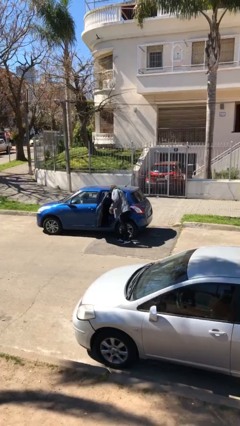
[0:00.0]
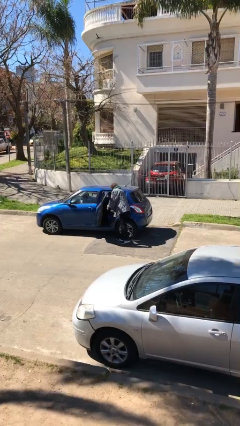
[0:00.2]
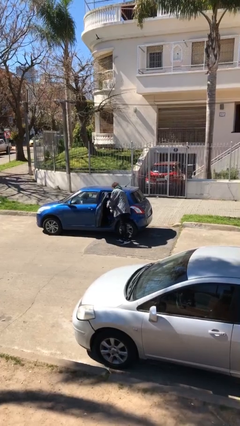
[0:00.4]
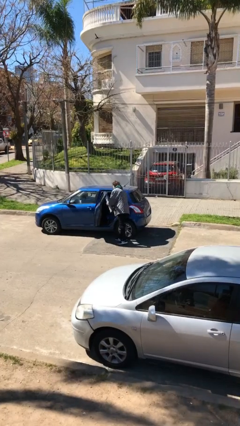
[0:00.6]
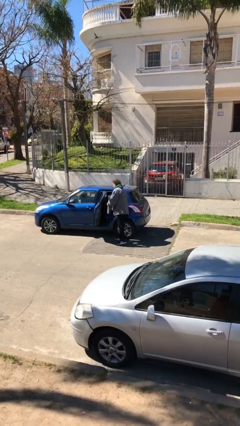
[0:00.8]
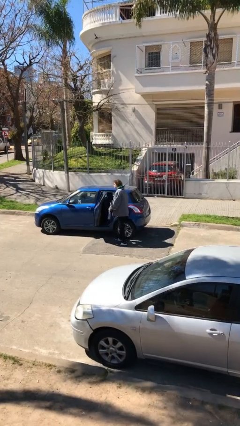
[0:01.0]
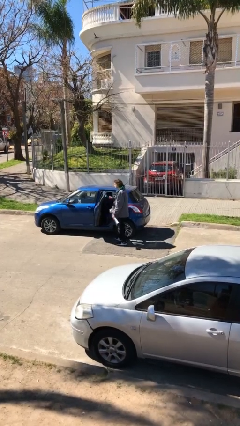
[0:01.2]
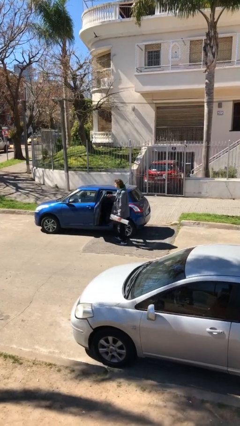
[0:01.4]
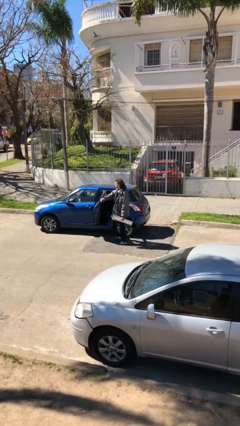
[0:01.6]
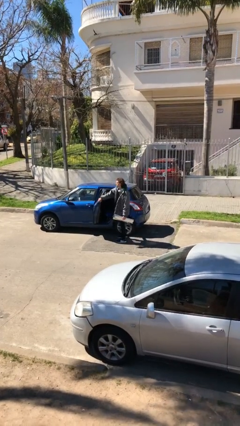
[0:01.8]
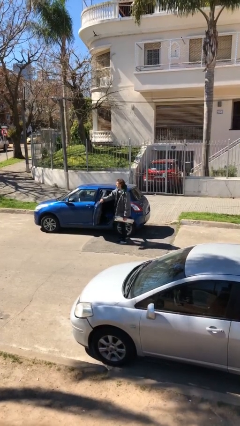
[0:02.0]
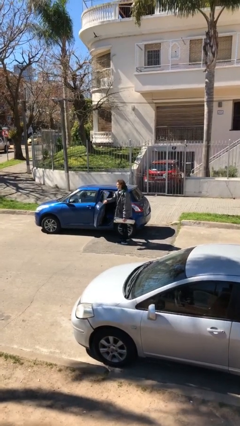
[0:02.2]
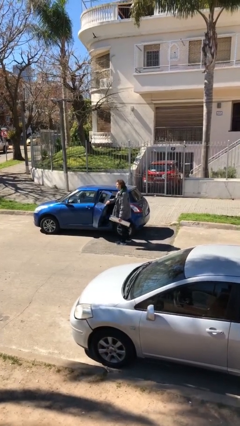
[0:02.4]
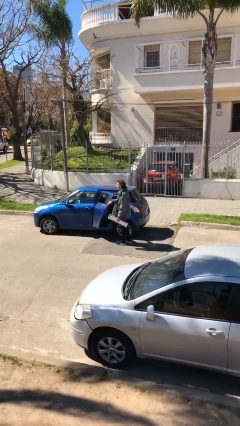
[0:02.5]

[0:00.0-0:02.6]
person unloads car

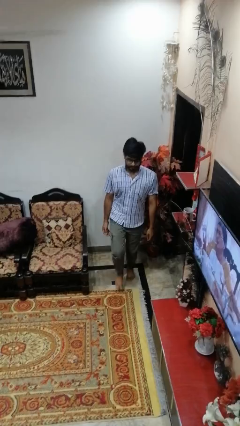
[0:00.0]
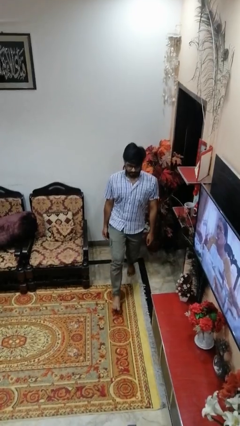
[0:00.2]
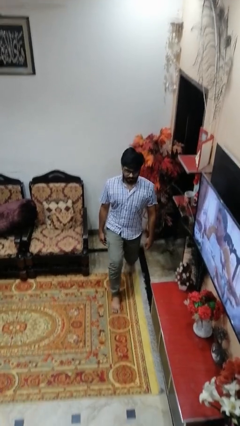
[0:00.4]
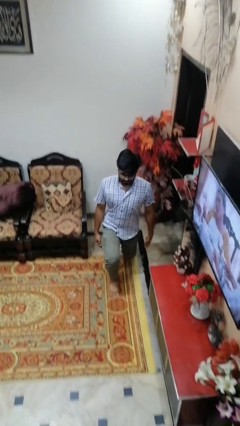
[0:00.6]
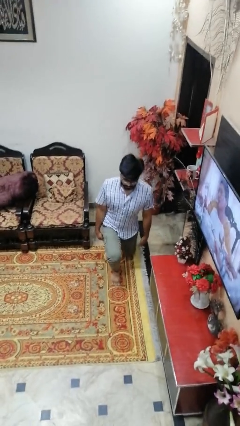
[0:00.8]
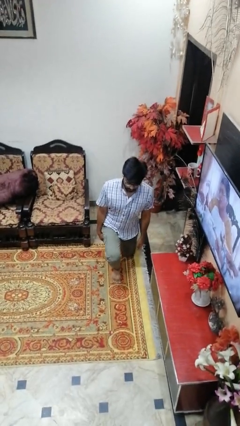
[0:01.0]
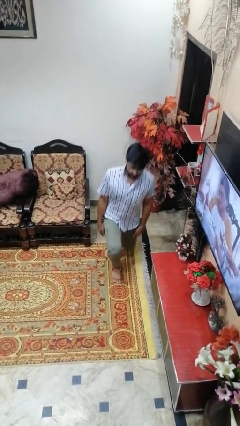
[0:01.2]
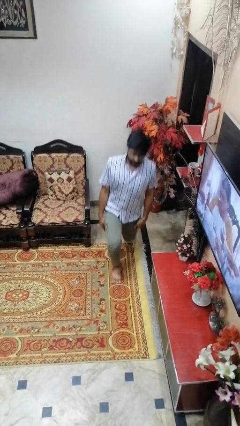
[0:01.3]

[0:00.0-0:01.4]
person exercises with lunges

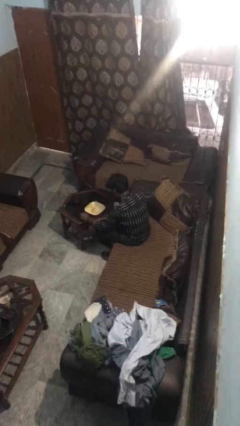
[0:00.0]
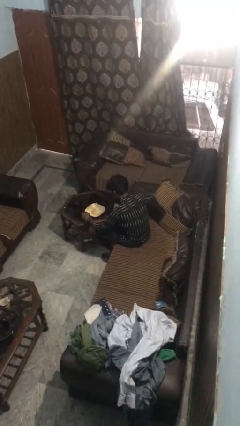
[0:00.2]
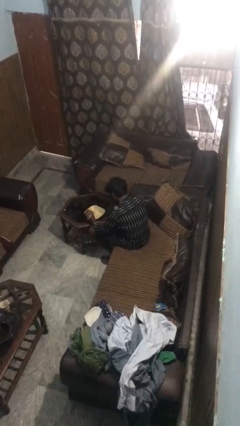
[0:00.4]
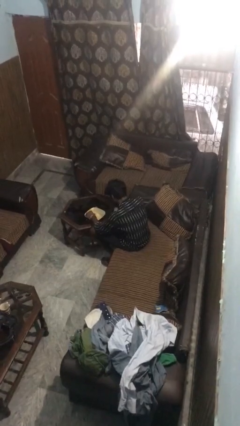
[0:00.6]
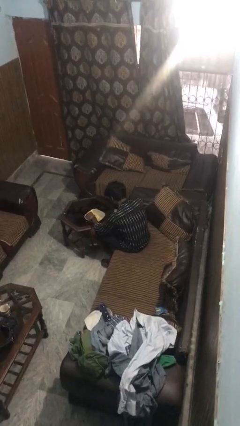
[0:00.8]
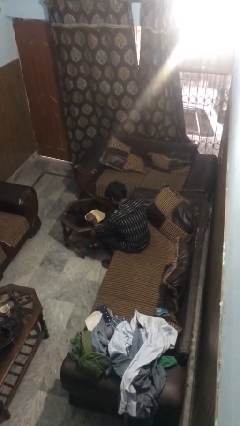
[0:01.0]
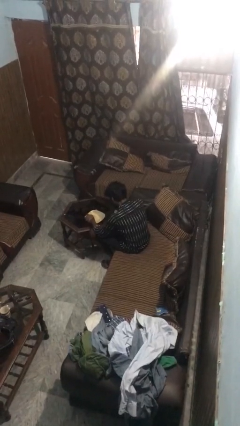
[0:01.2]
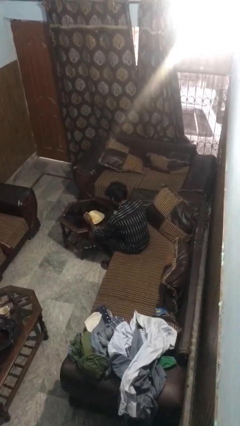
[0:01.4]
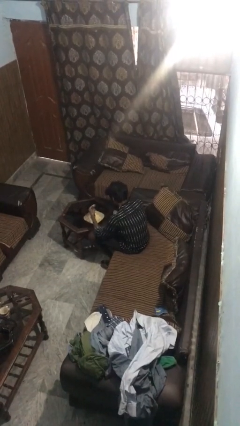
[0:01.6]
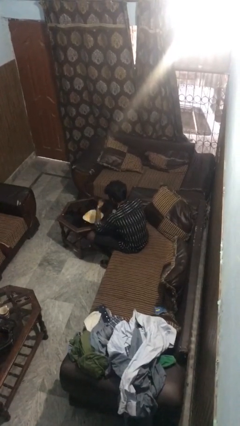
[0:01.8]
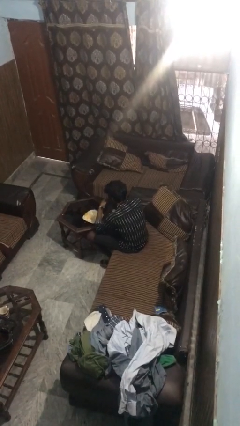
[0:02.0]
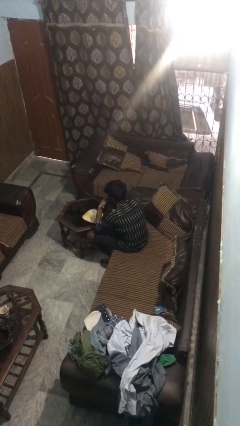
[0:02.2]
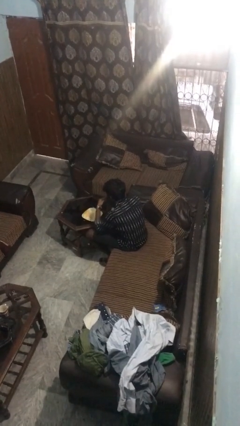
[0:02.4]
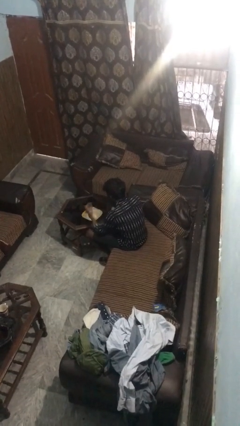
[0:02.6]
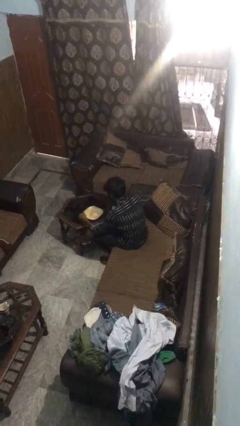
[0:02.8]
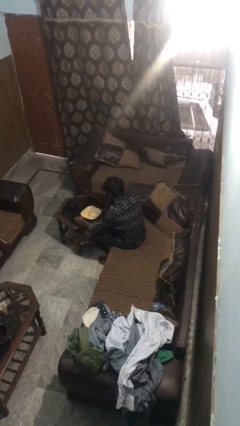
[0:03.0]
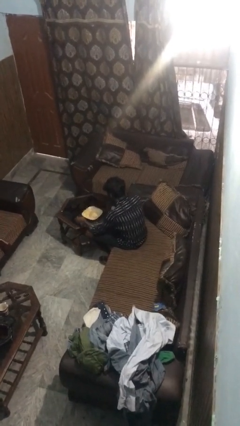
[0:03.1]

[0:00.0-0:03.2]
person eats with hands

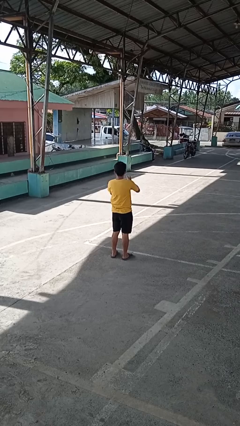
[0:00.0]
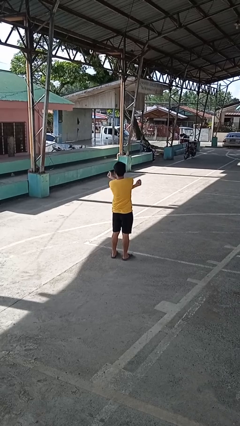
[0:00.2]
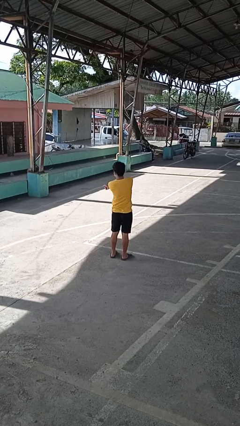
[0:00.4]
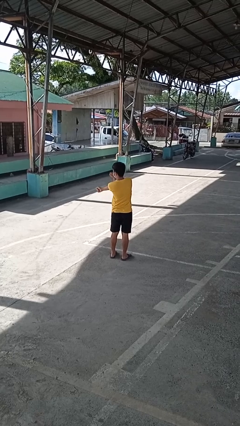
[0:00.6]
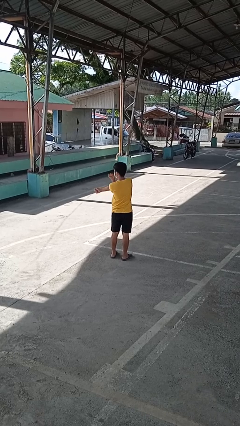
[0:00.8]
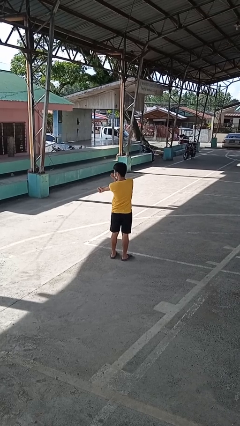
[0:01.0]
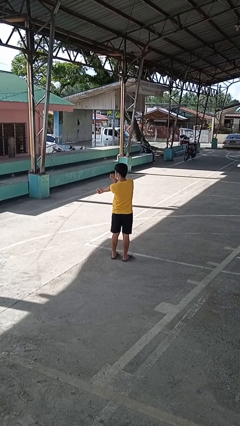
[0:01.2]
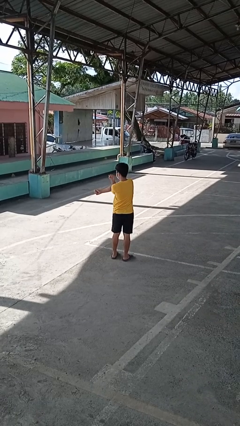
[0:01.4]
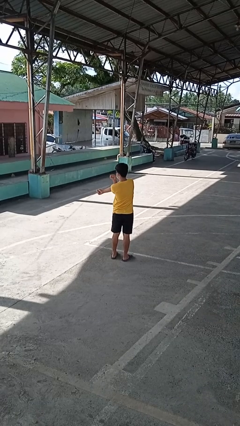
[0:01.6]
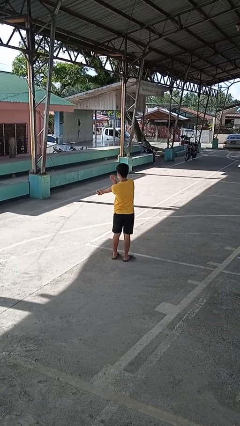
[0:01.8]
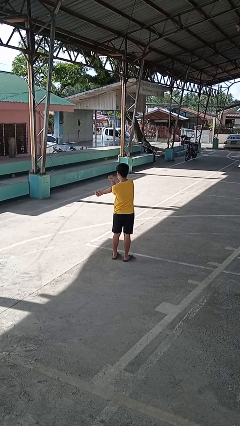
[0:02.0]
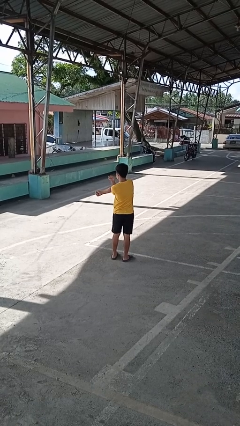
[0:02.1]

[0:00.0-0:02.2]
person stretches arms to side

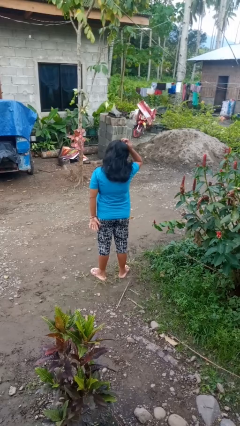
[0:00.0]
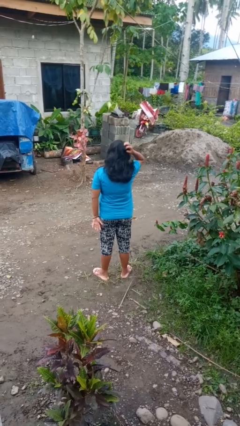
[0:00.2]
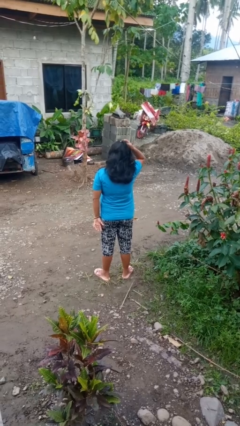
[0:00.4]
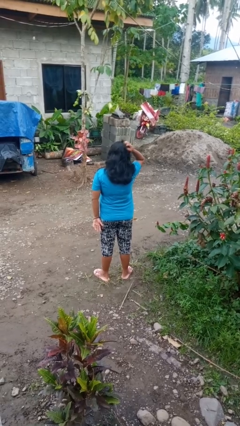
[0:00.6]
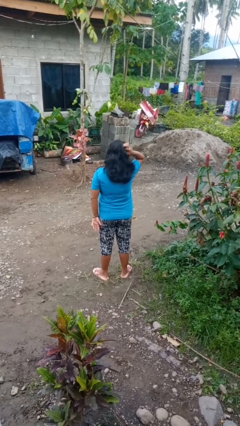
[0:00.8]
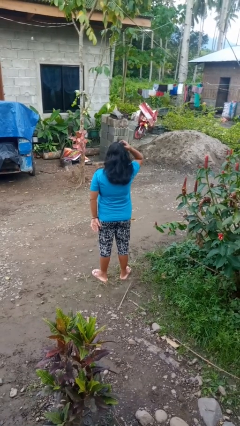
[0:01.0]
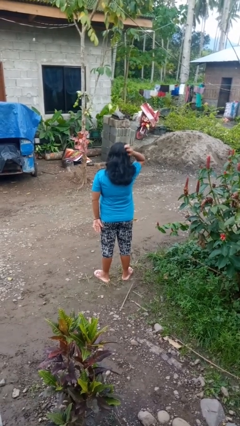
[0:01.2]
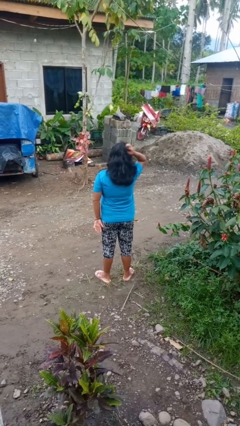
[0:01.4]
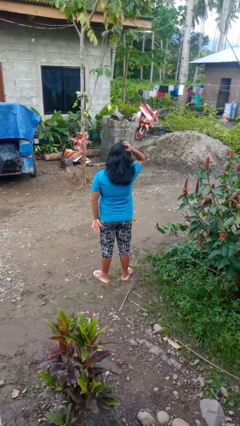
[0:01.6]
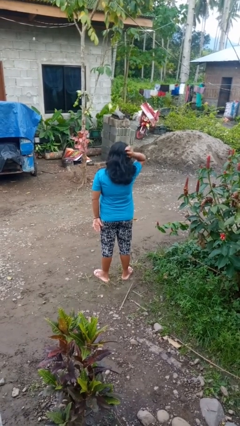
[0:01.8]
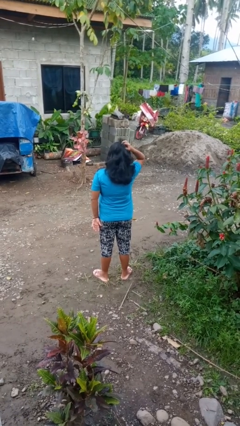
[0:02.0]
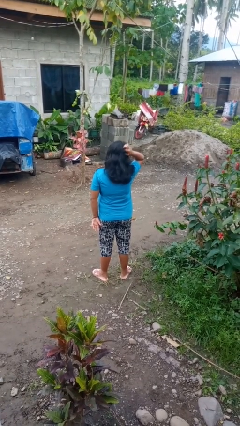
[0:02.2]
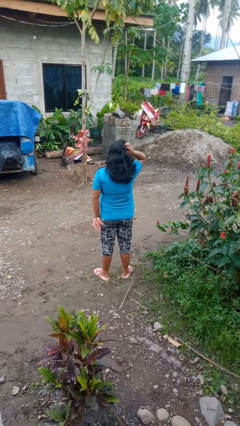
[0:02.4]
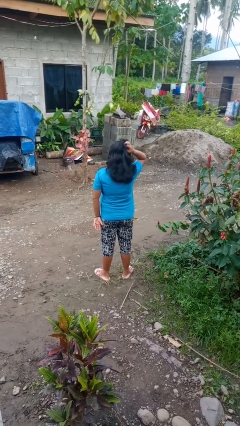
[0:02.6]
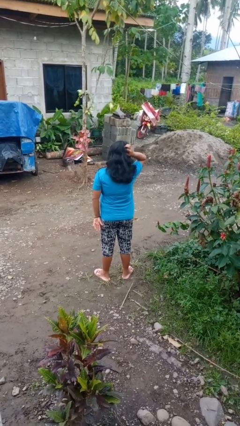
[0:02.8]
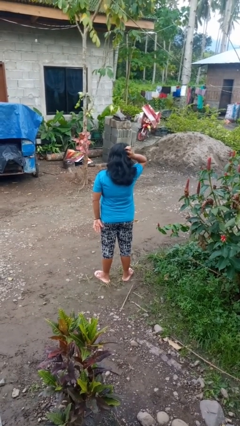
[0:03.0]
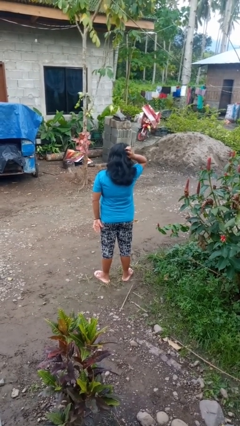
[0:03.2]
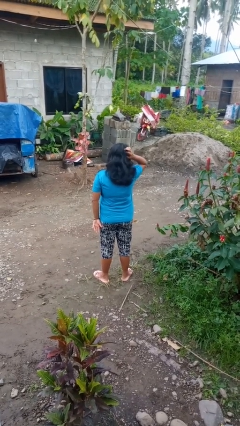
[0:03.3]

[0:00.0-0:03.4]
person scratches face

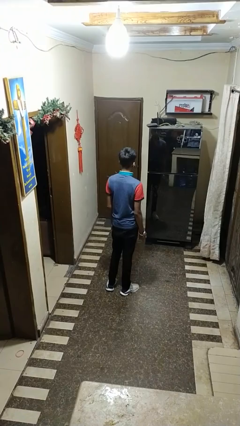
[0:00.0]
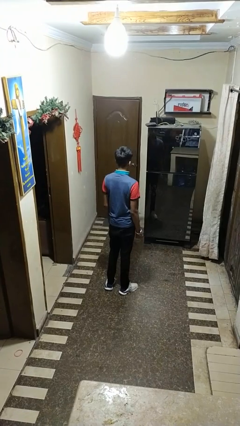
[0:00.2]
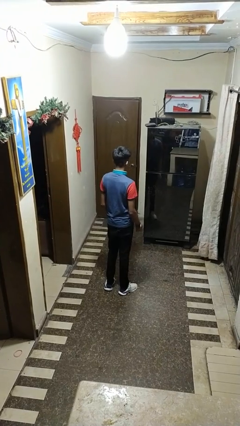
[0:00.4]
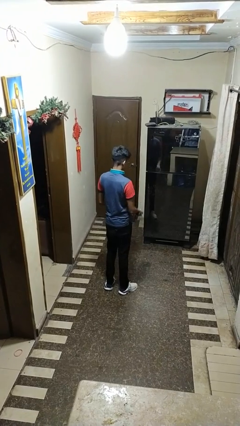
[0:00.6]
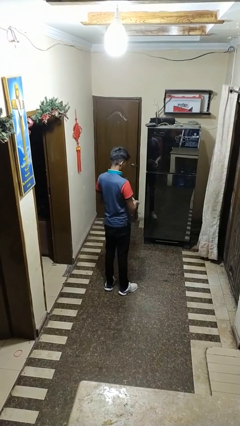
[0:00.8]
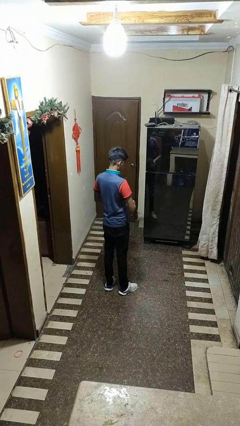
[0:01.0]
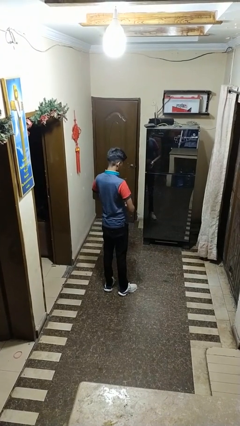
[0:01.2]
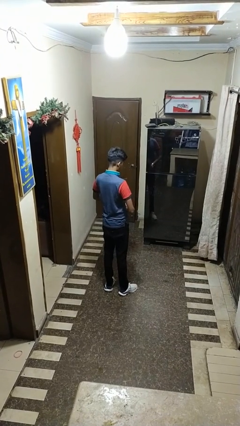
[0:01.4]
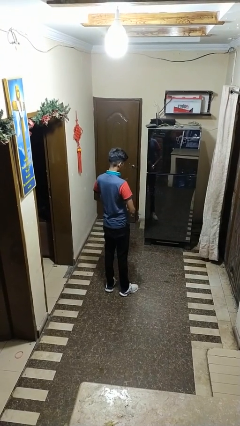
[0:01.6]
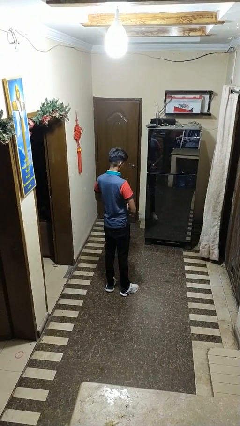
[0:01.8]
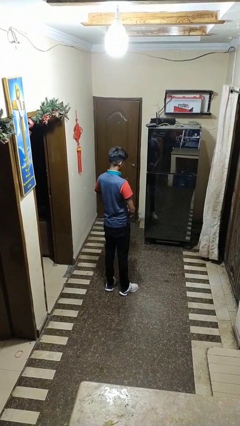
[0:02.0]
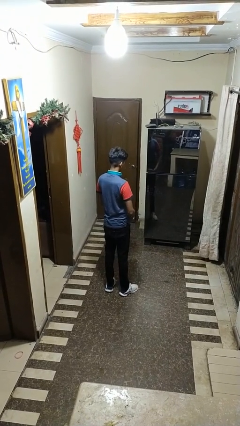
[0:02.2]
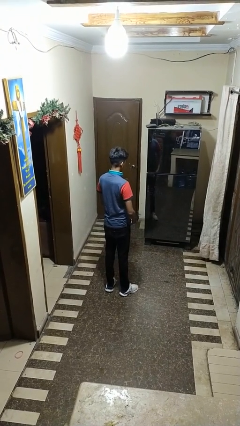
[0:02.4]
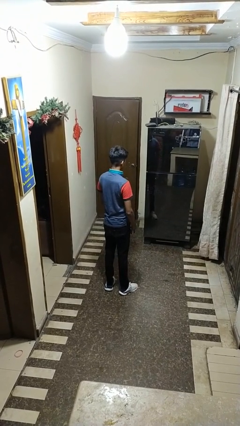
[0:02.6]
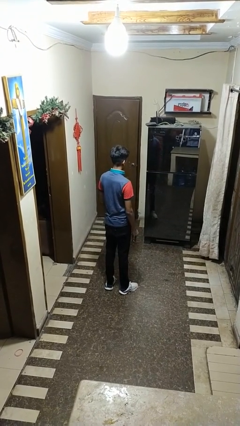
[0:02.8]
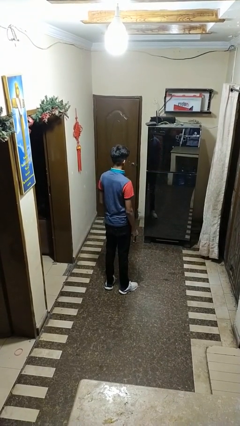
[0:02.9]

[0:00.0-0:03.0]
person takes off wristwatch

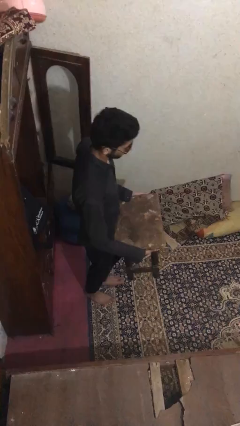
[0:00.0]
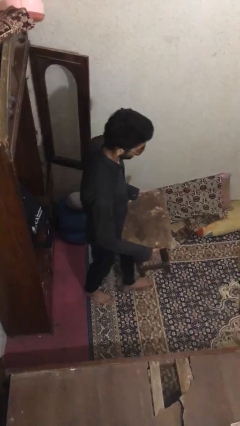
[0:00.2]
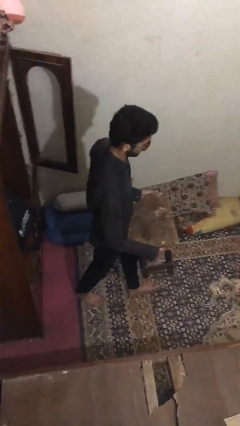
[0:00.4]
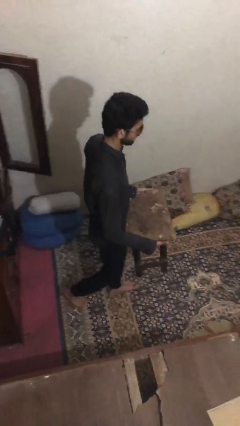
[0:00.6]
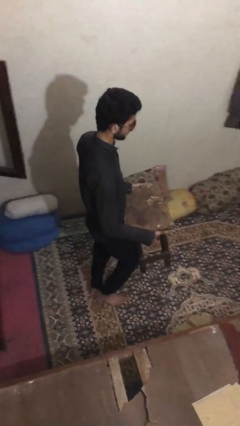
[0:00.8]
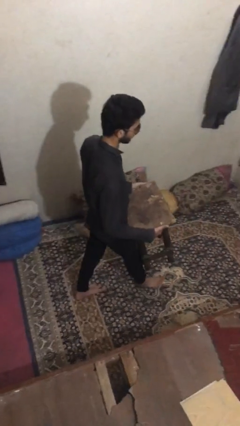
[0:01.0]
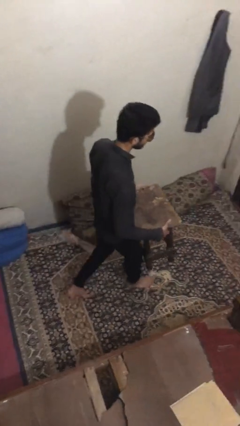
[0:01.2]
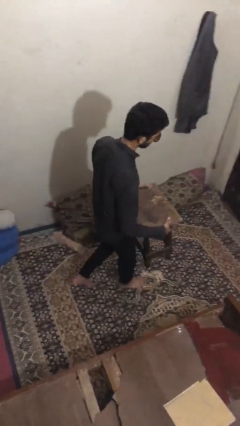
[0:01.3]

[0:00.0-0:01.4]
person carries heavy object
